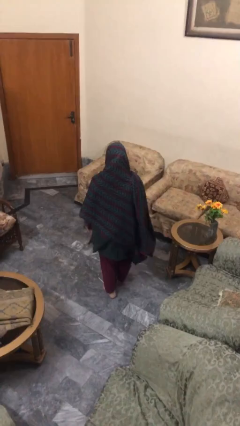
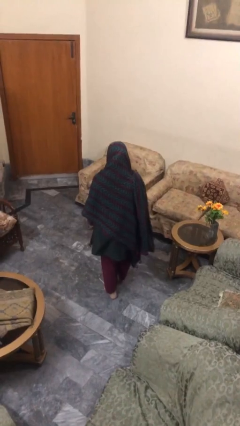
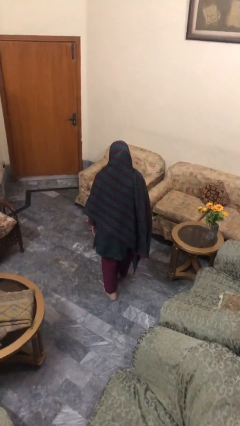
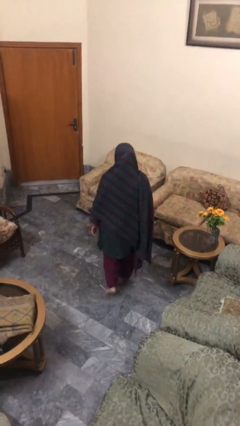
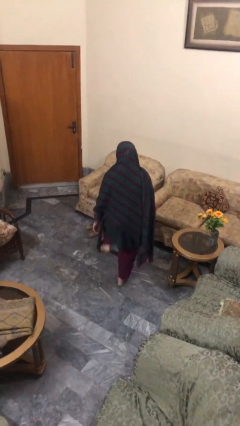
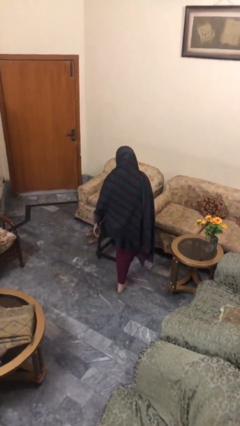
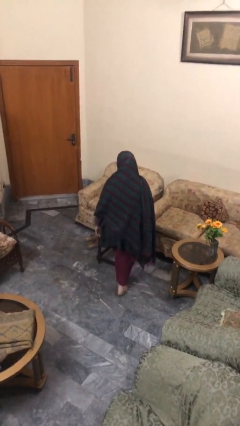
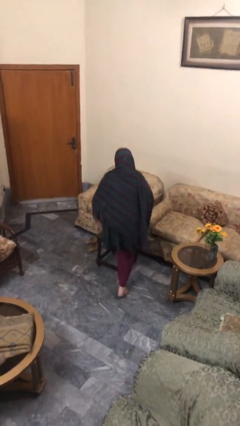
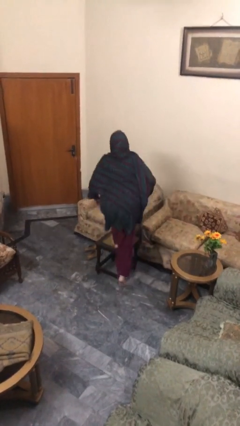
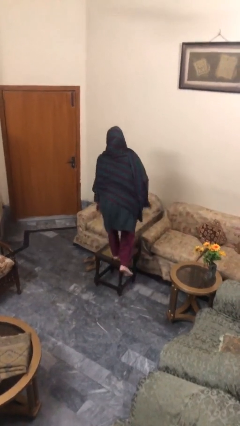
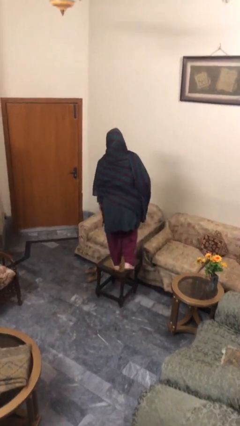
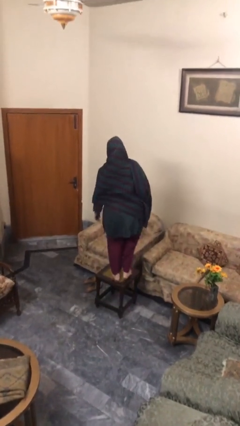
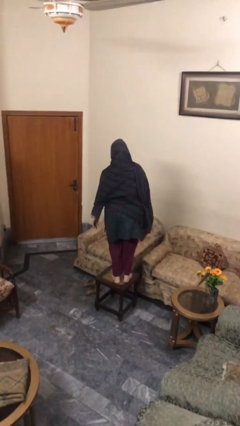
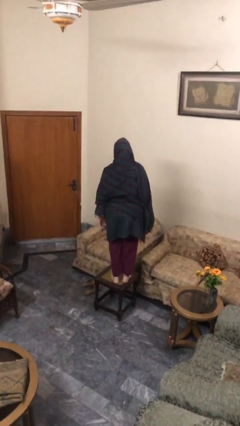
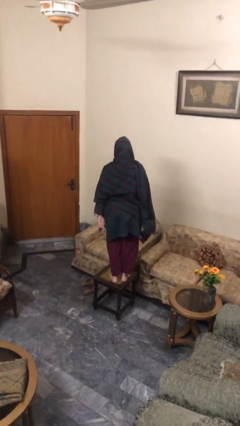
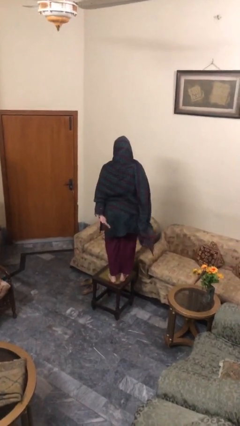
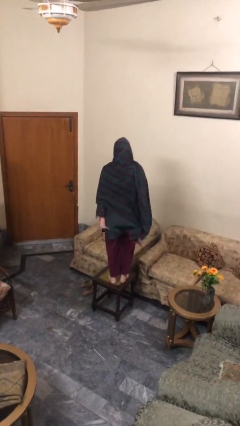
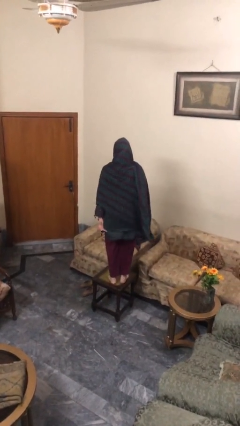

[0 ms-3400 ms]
person climbs on table

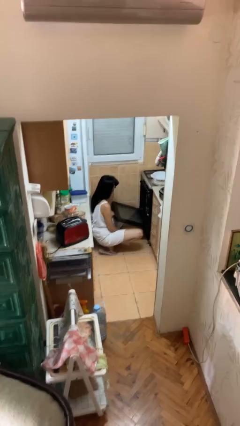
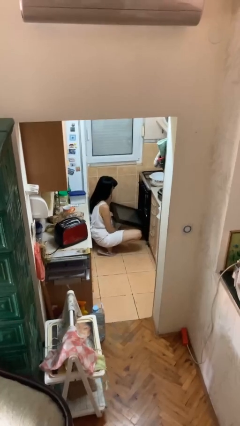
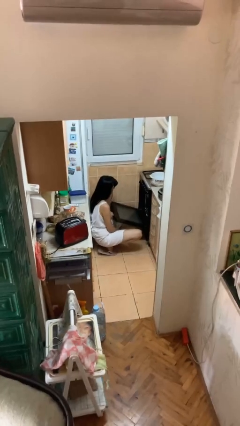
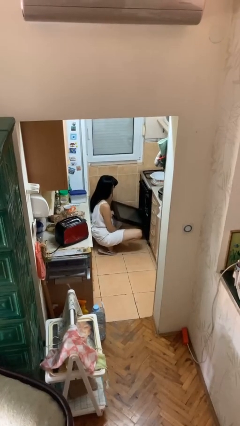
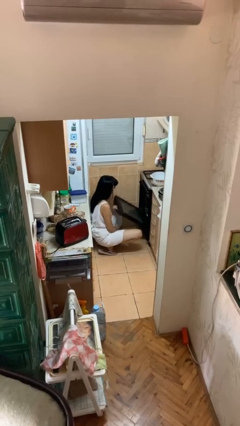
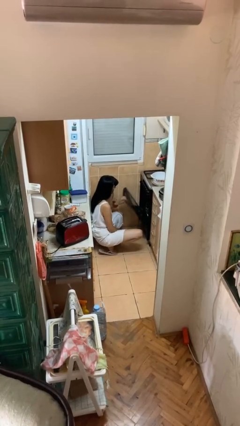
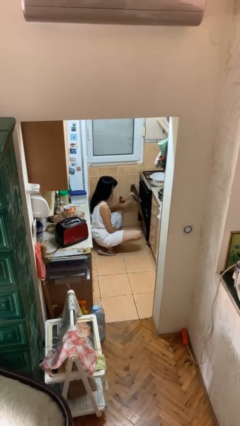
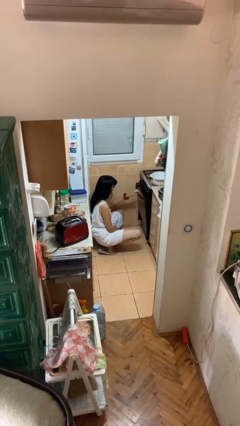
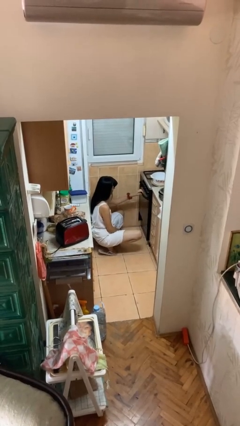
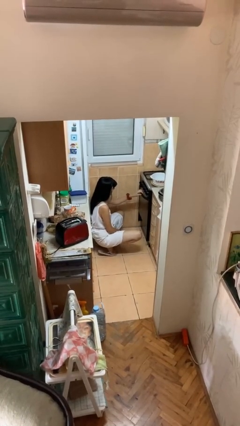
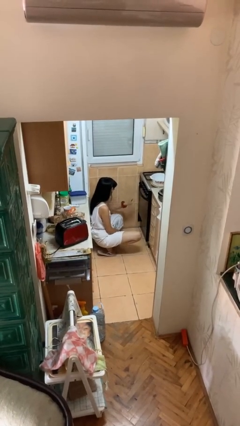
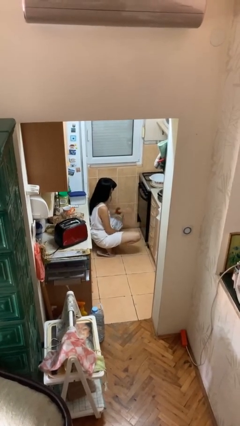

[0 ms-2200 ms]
person closes oven door

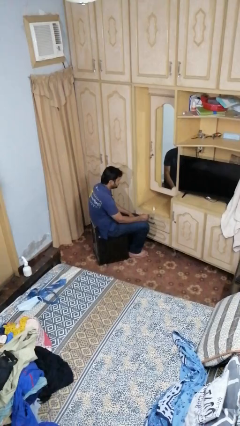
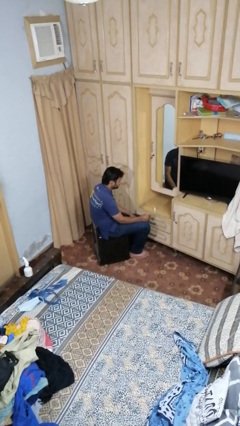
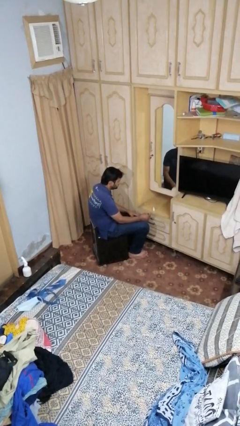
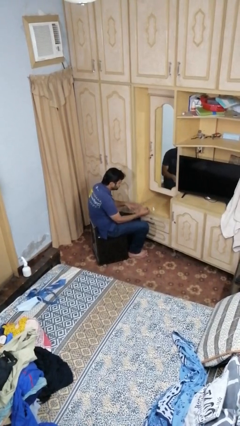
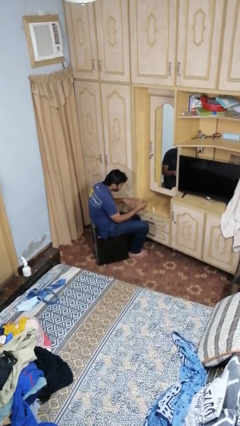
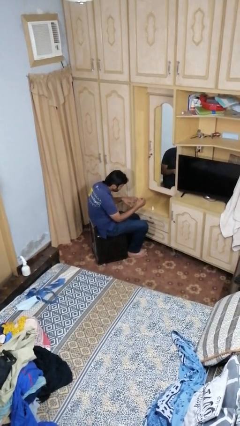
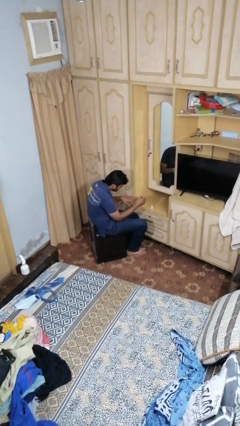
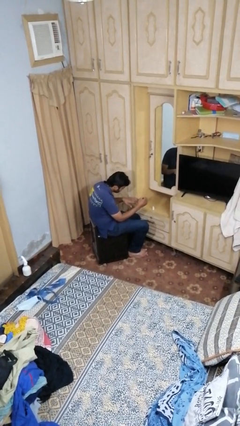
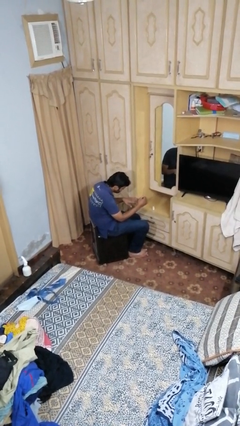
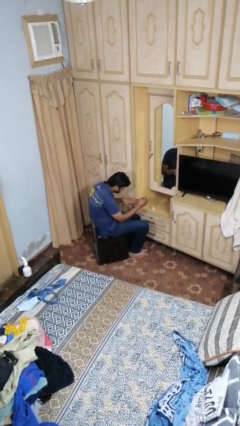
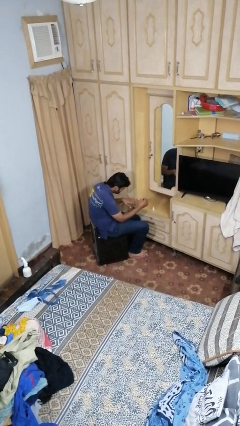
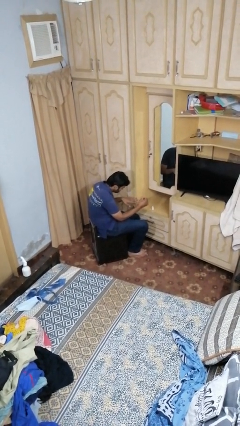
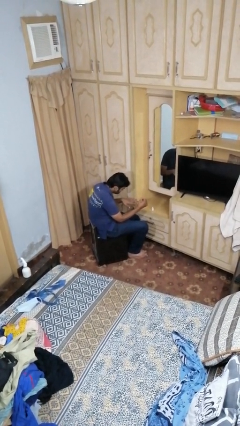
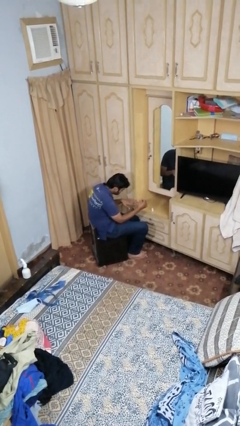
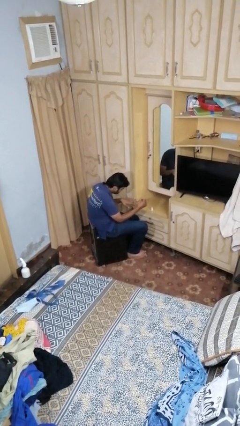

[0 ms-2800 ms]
person paints fingernails

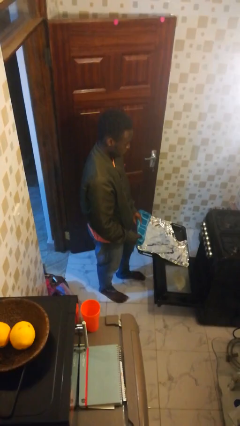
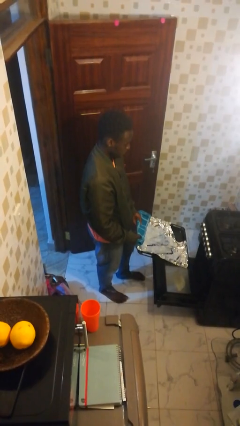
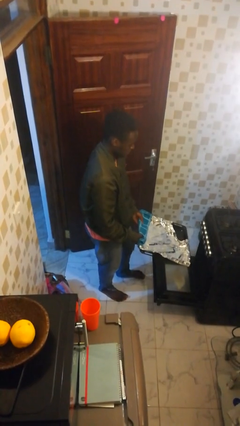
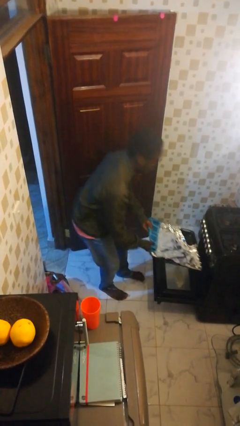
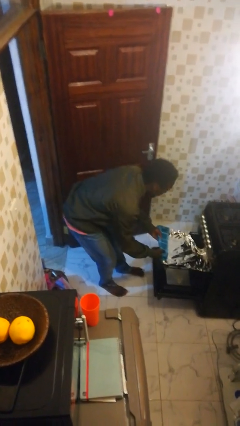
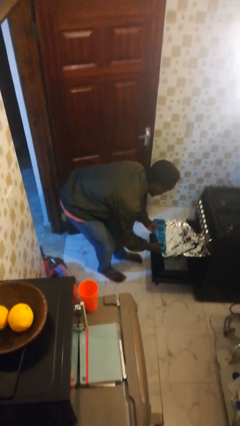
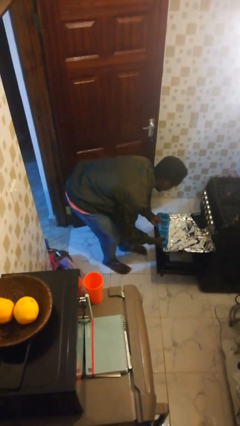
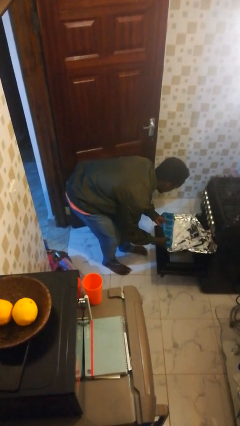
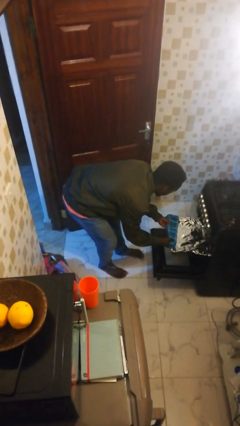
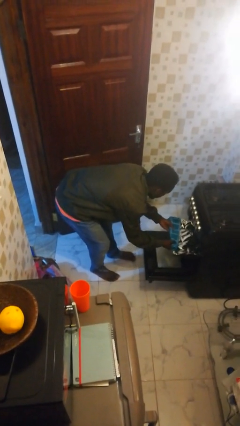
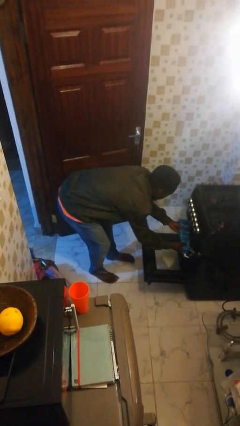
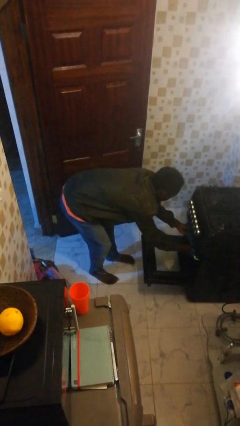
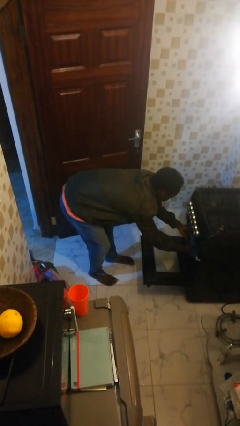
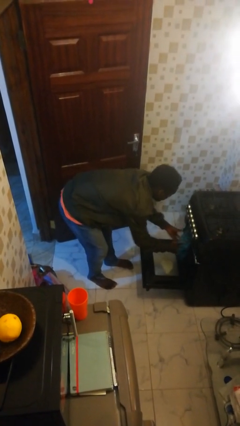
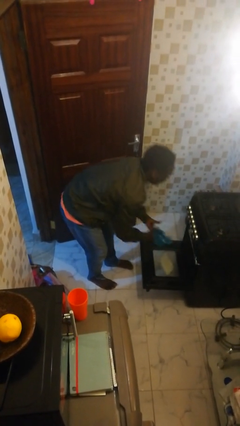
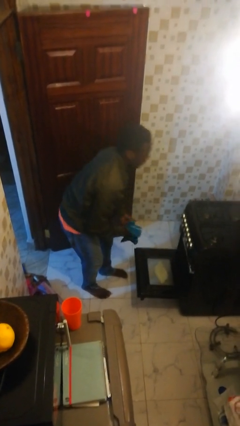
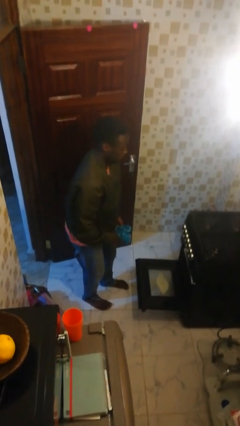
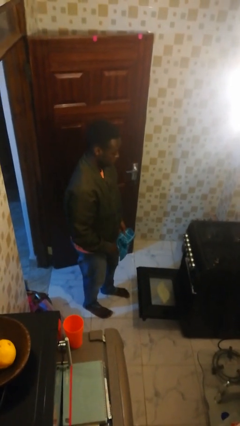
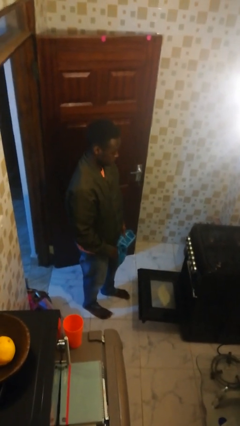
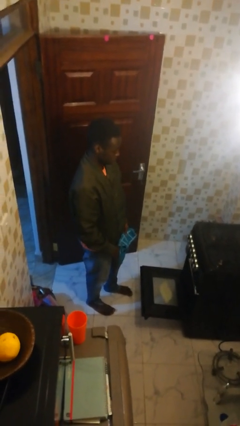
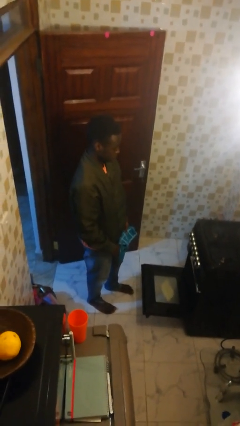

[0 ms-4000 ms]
person puts object into oven

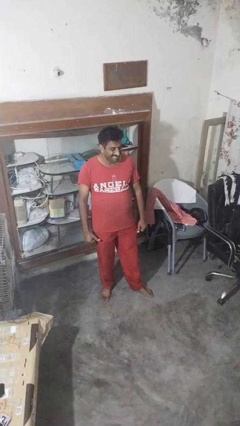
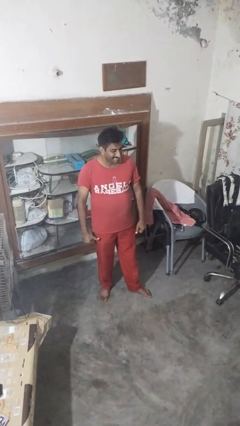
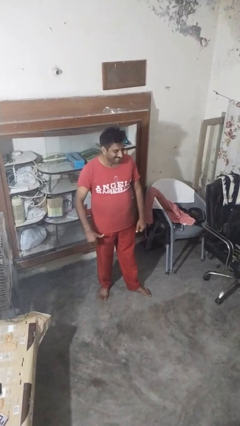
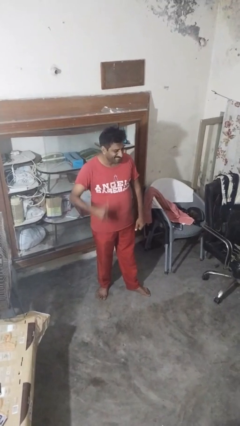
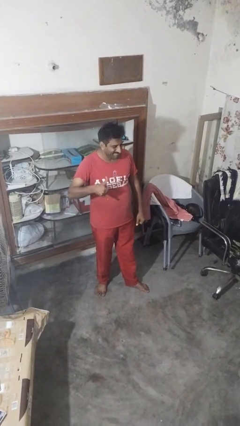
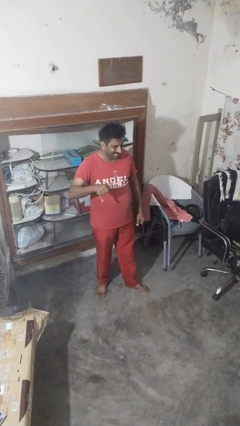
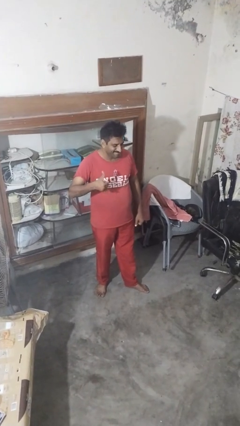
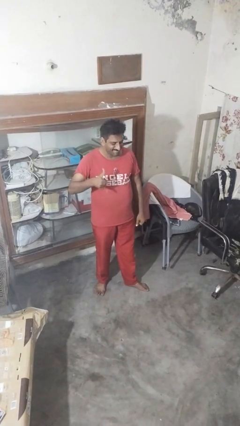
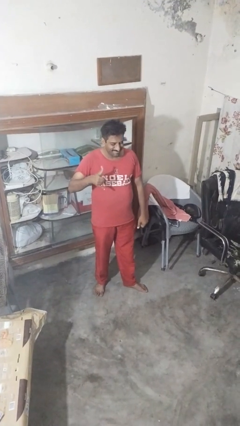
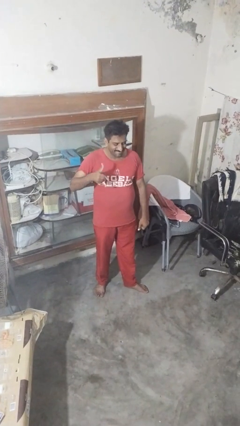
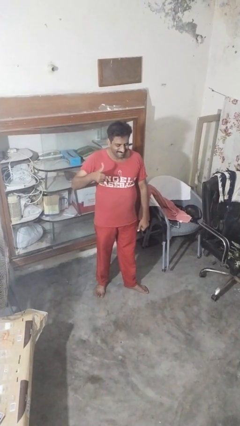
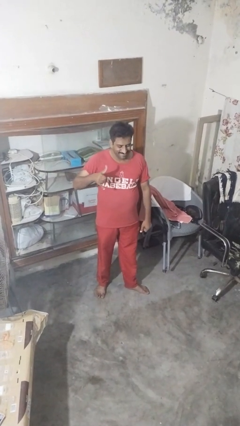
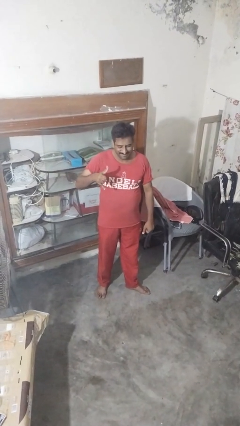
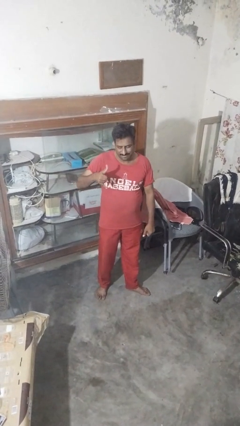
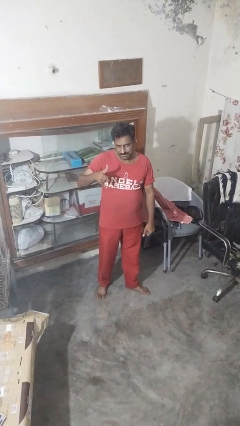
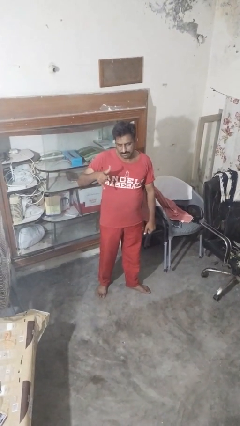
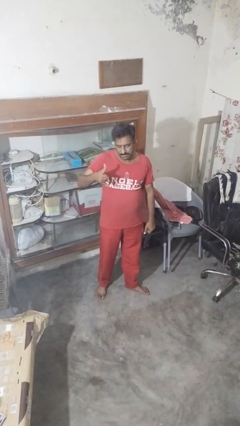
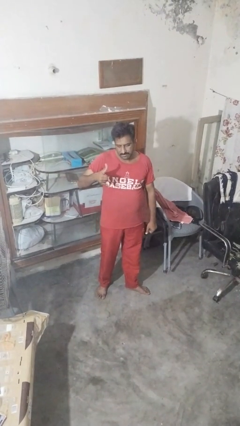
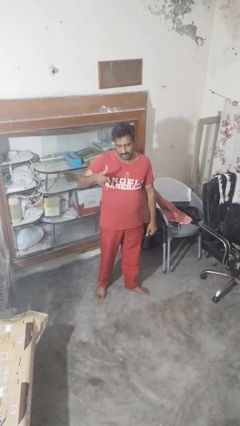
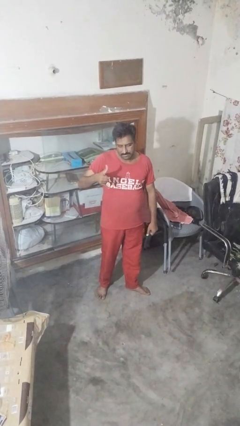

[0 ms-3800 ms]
person gestures hang loose

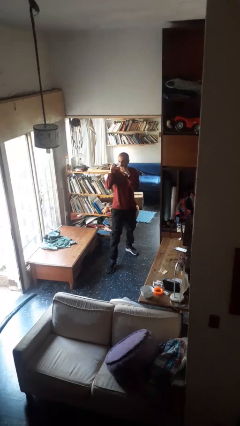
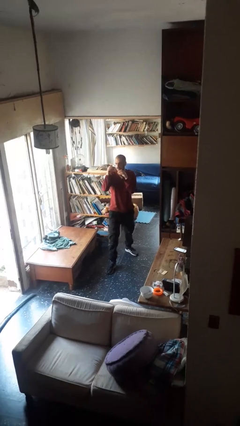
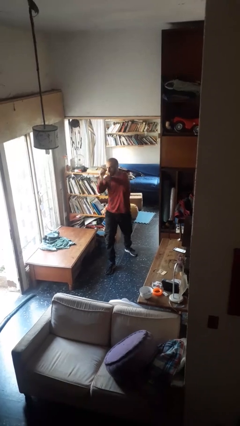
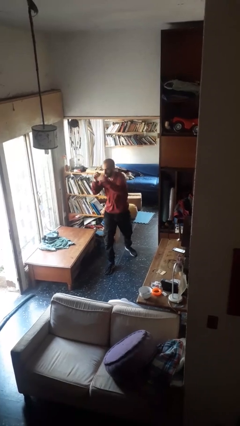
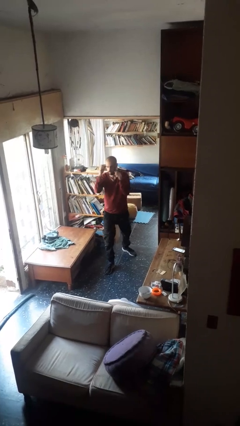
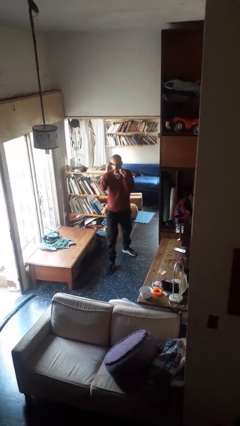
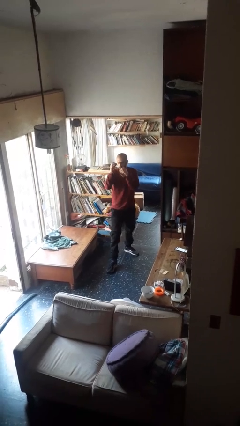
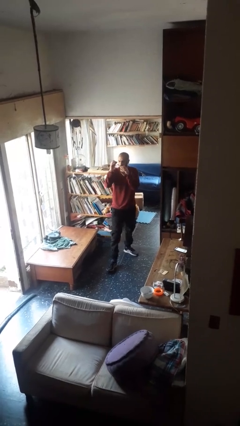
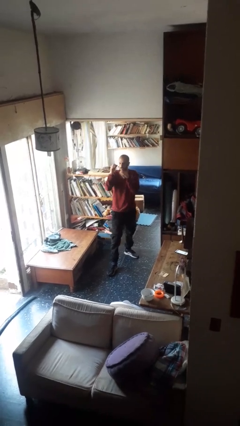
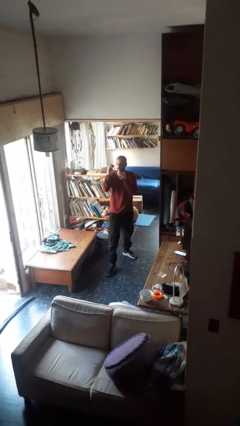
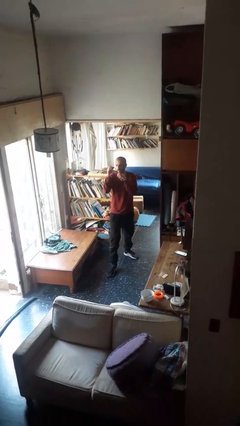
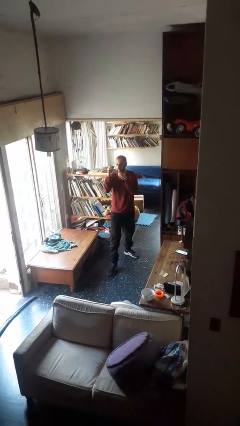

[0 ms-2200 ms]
person karate chop
